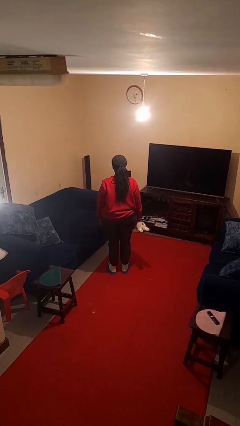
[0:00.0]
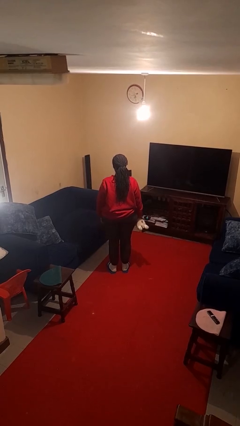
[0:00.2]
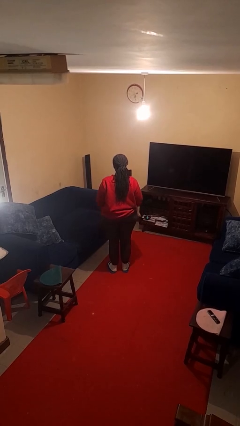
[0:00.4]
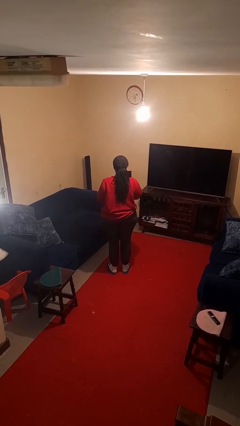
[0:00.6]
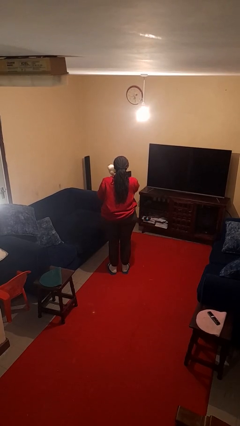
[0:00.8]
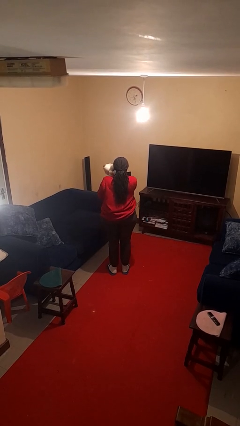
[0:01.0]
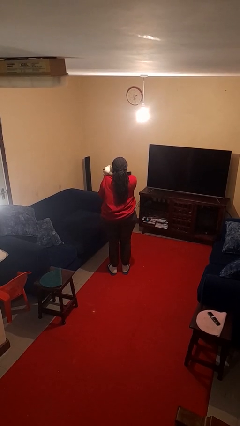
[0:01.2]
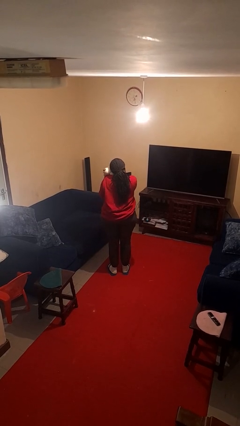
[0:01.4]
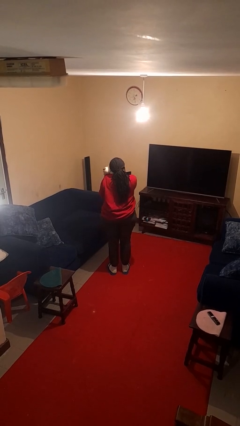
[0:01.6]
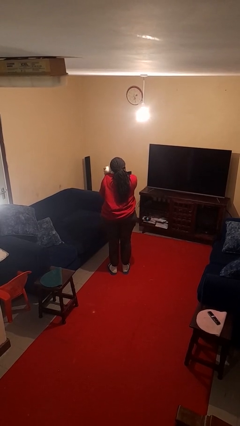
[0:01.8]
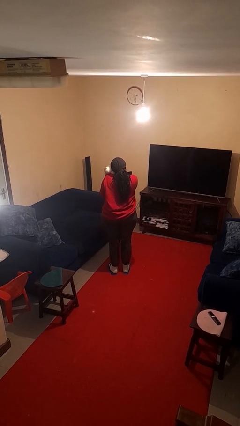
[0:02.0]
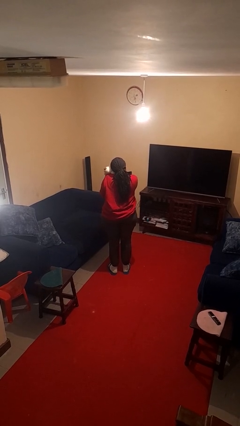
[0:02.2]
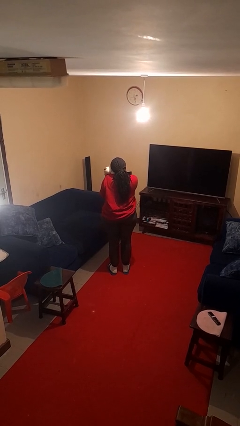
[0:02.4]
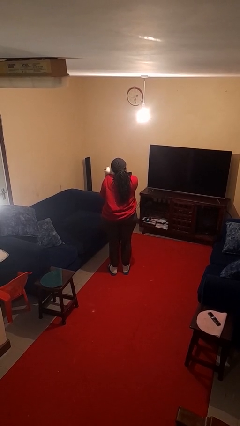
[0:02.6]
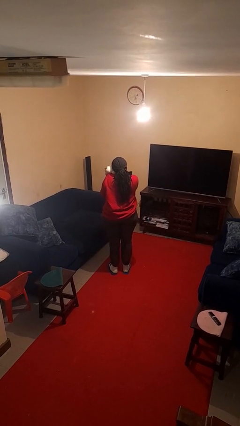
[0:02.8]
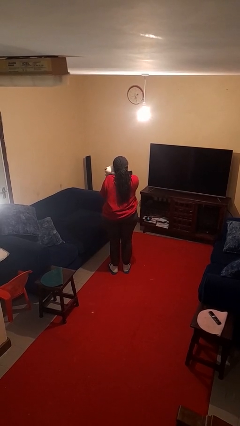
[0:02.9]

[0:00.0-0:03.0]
person hugs stuffed animal

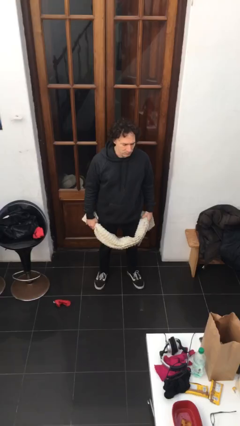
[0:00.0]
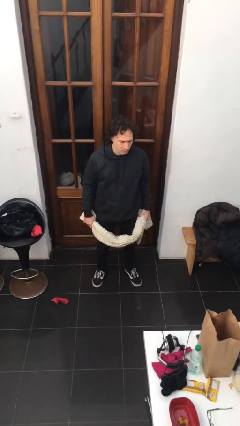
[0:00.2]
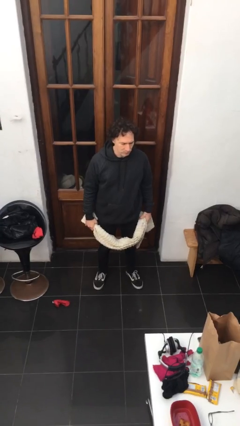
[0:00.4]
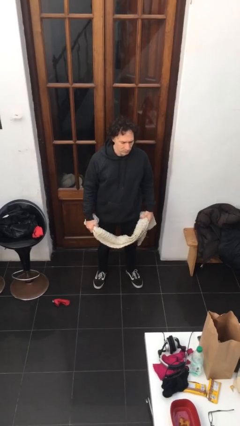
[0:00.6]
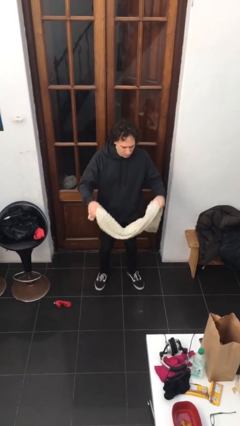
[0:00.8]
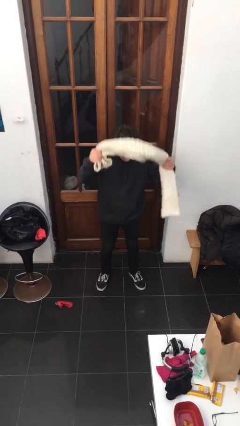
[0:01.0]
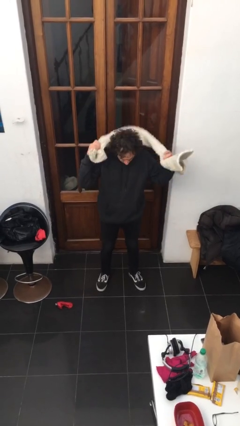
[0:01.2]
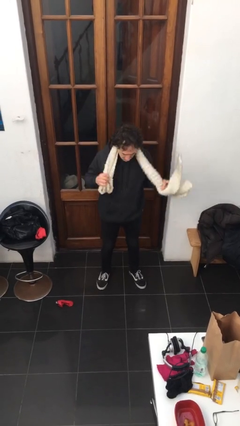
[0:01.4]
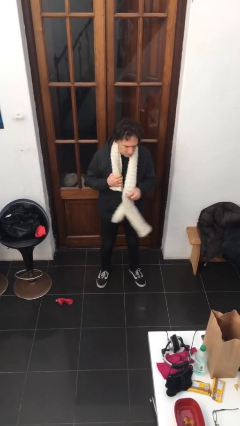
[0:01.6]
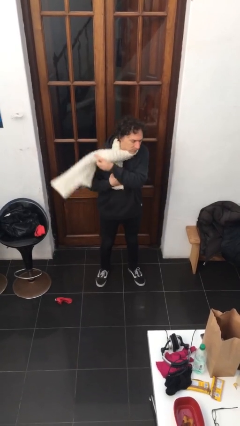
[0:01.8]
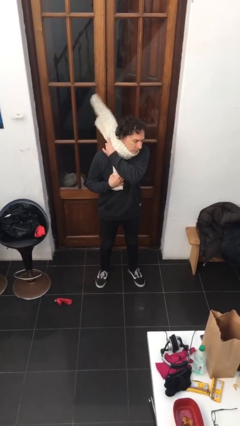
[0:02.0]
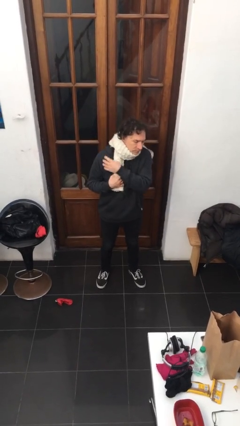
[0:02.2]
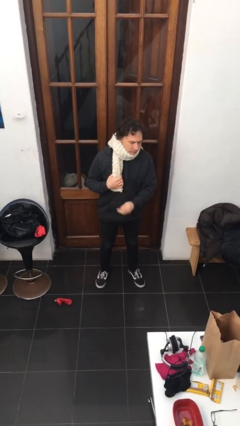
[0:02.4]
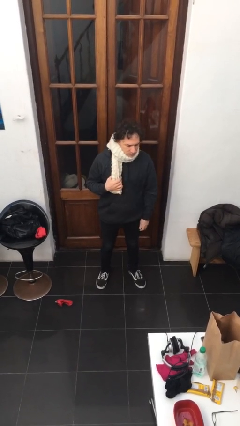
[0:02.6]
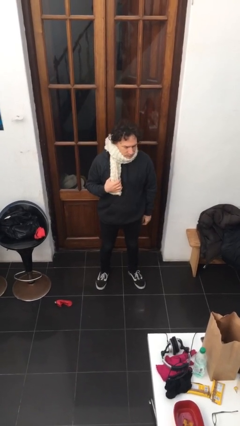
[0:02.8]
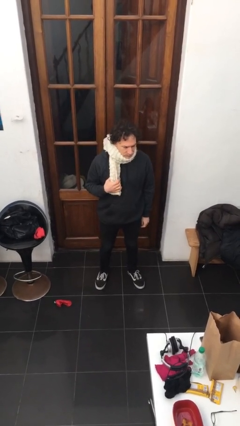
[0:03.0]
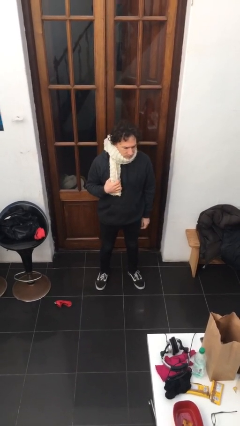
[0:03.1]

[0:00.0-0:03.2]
person puts on scarf

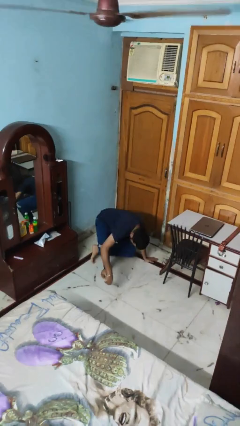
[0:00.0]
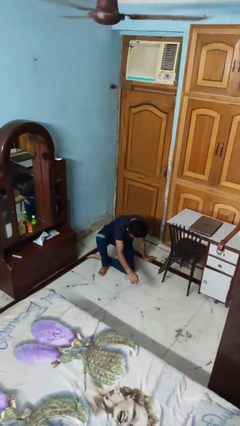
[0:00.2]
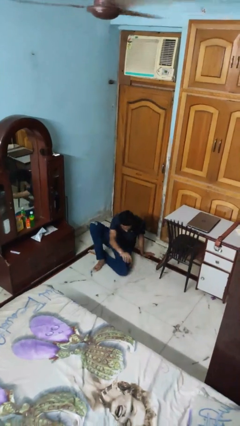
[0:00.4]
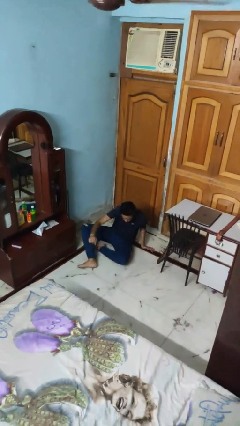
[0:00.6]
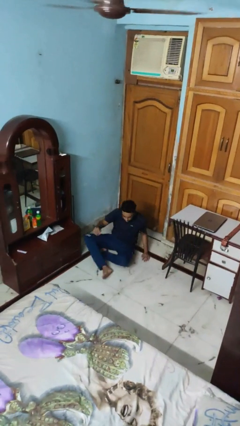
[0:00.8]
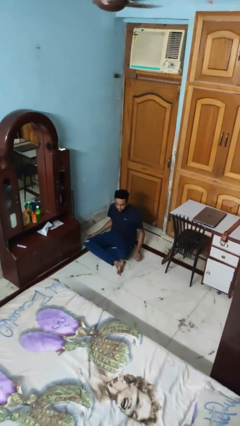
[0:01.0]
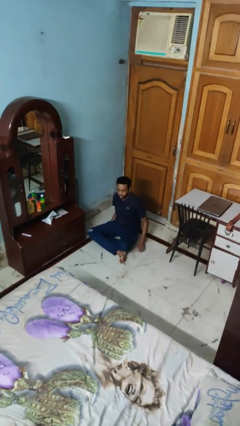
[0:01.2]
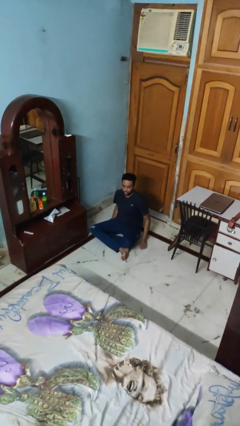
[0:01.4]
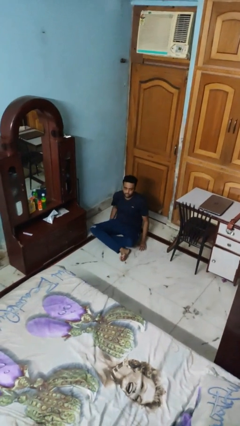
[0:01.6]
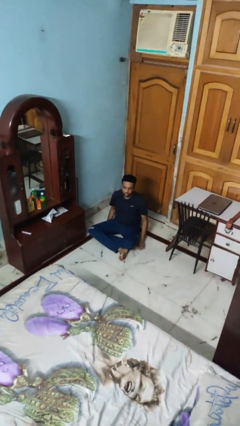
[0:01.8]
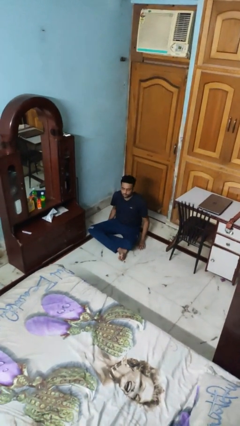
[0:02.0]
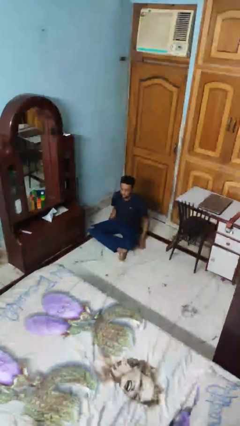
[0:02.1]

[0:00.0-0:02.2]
person sits crisscross

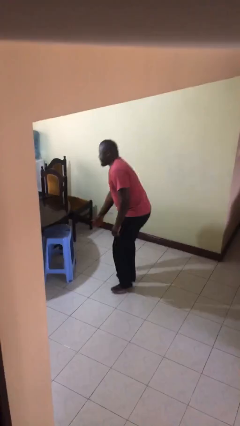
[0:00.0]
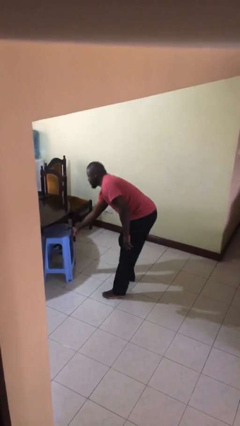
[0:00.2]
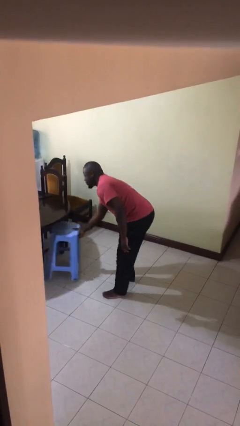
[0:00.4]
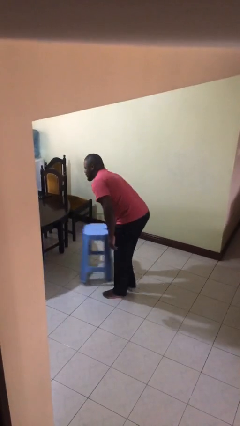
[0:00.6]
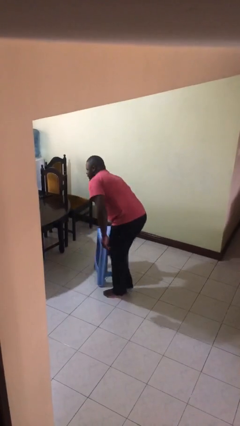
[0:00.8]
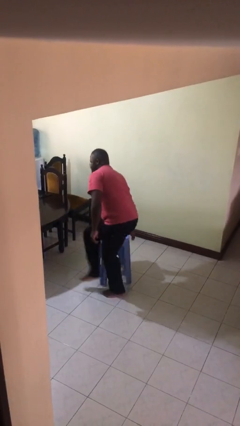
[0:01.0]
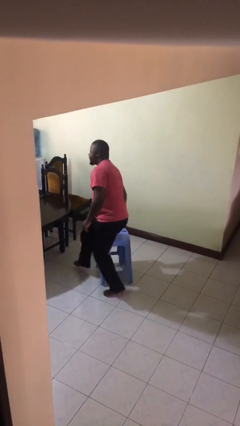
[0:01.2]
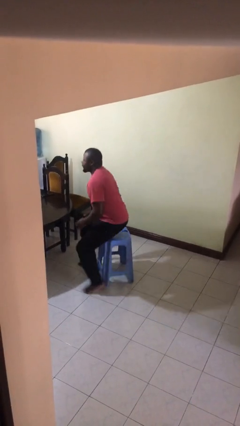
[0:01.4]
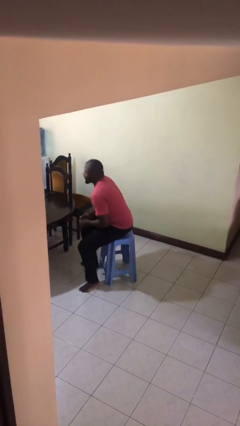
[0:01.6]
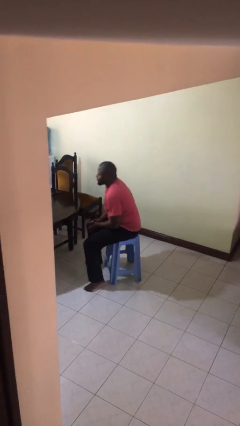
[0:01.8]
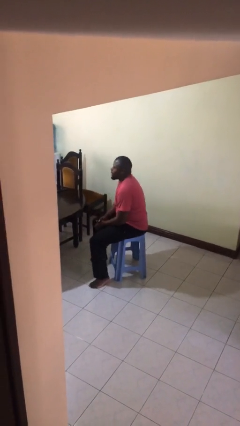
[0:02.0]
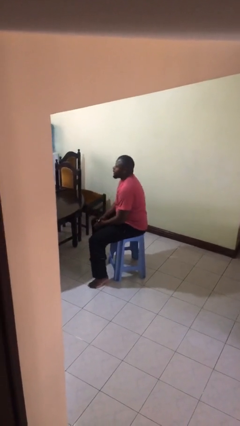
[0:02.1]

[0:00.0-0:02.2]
person sits down

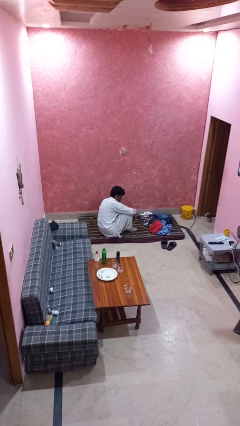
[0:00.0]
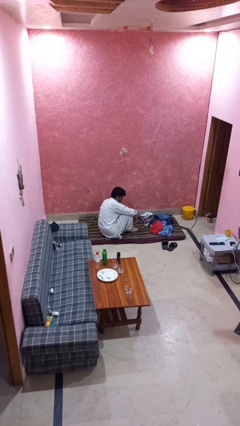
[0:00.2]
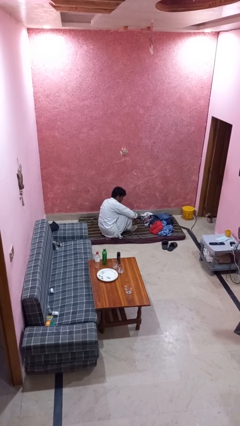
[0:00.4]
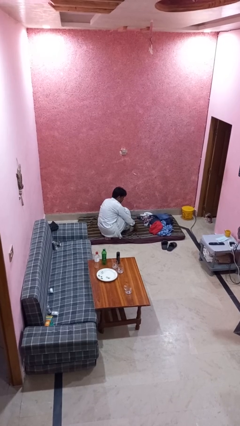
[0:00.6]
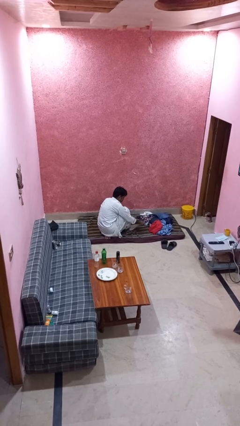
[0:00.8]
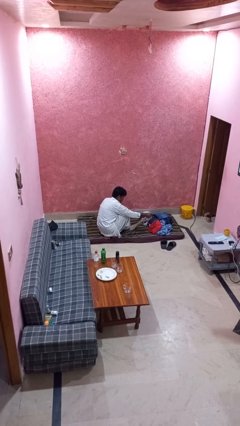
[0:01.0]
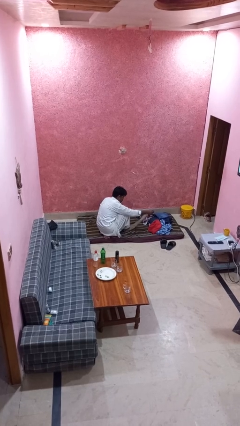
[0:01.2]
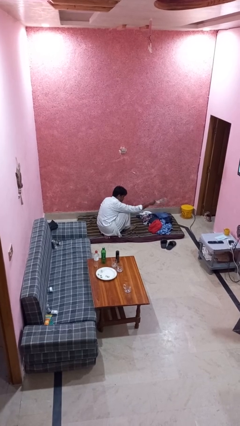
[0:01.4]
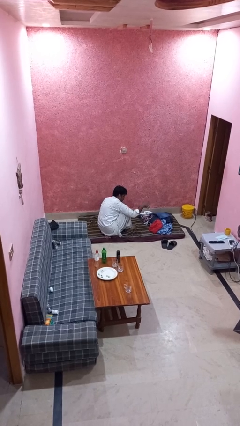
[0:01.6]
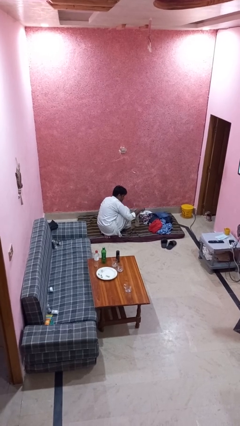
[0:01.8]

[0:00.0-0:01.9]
person takes off socks

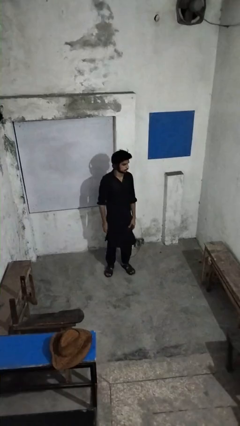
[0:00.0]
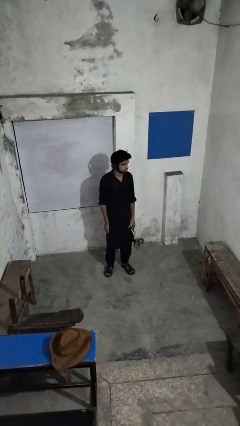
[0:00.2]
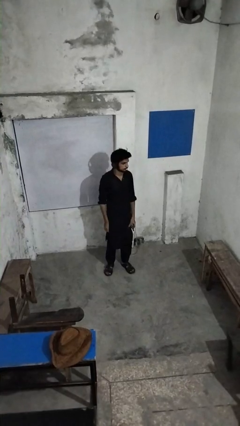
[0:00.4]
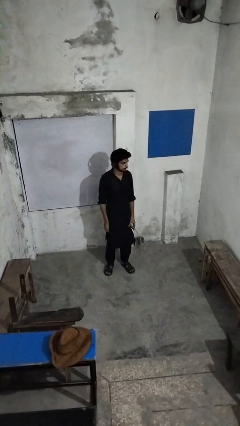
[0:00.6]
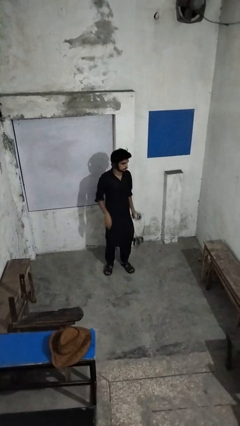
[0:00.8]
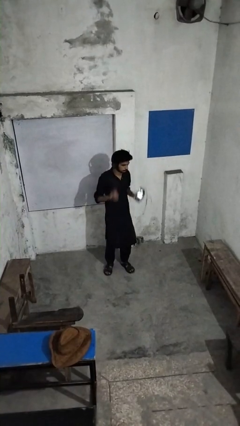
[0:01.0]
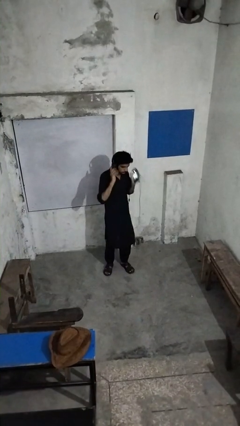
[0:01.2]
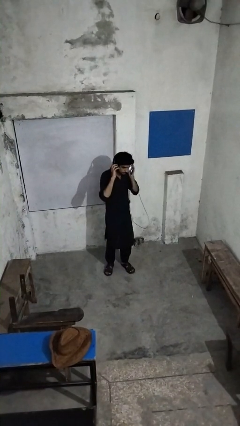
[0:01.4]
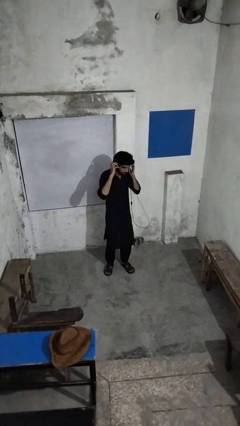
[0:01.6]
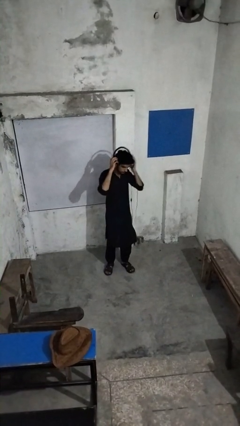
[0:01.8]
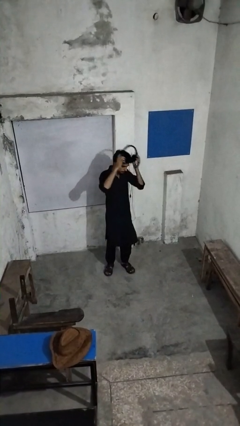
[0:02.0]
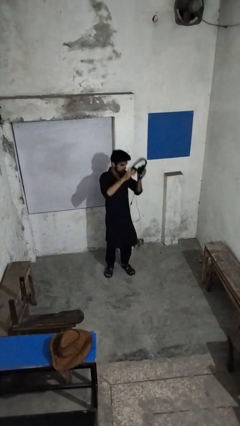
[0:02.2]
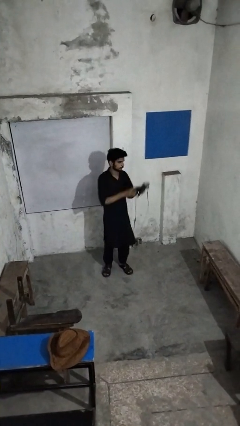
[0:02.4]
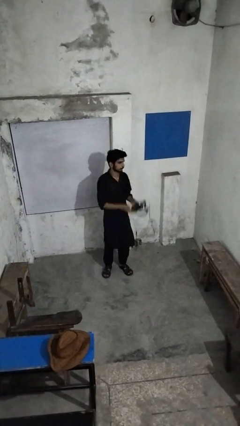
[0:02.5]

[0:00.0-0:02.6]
person takes off headphones

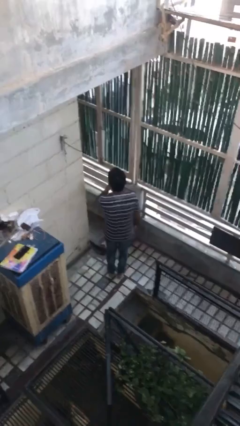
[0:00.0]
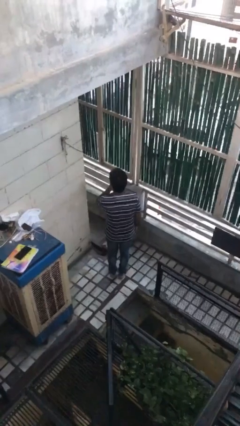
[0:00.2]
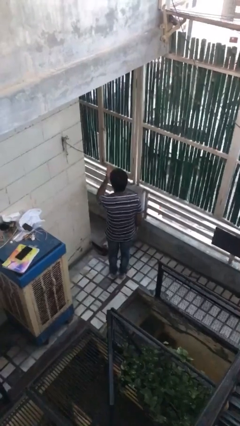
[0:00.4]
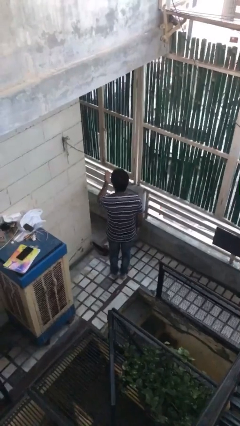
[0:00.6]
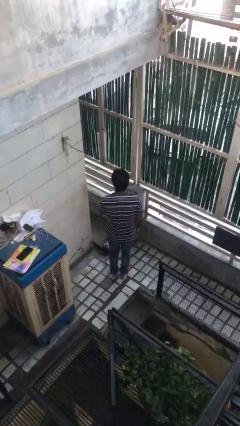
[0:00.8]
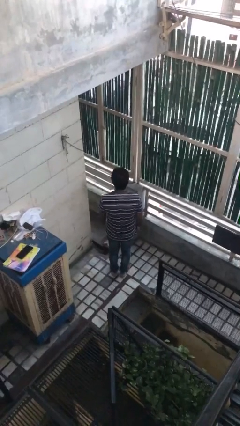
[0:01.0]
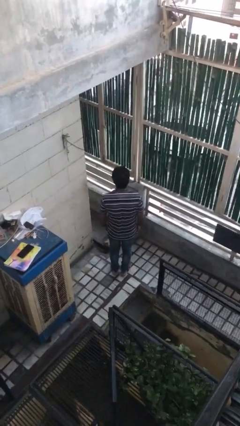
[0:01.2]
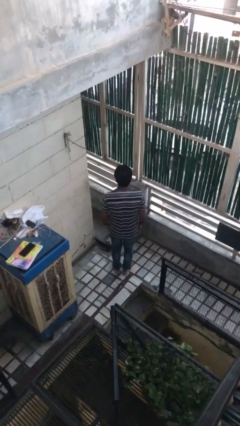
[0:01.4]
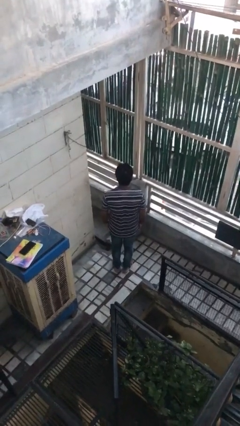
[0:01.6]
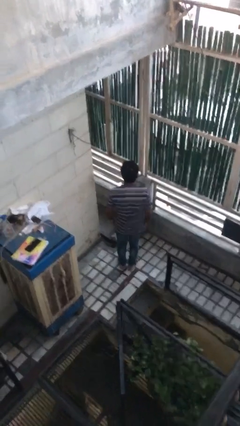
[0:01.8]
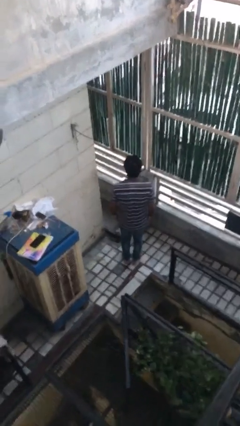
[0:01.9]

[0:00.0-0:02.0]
person gestures blow kiss
